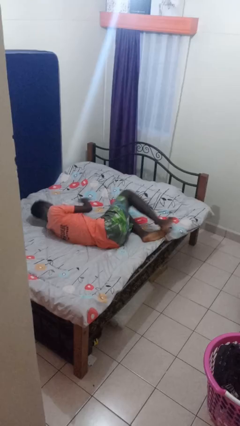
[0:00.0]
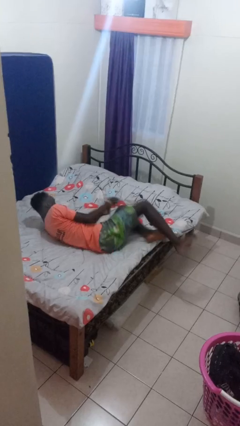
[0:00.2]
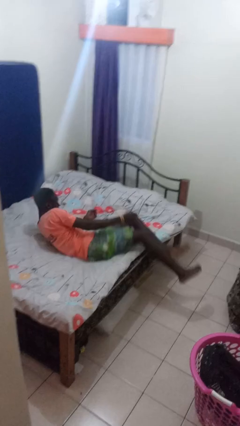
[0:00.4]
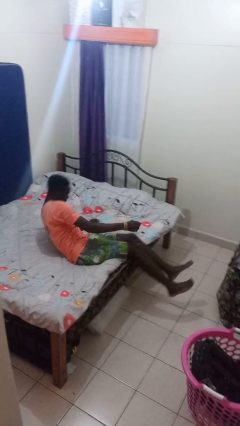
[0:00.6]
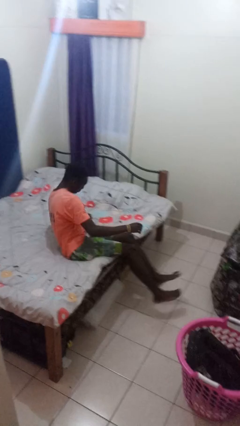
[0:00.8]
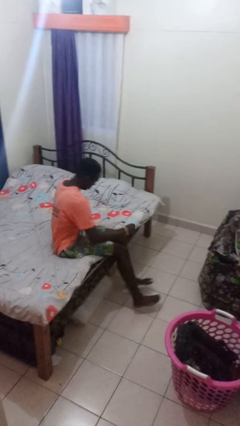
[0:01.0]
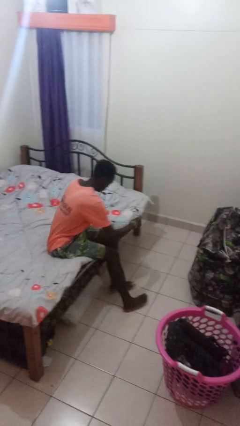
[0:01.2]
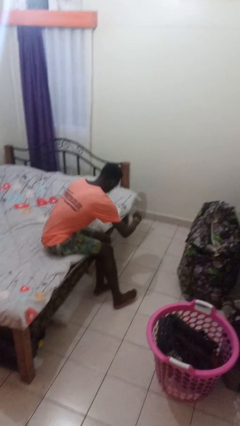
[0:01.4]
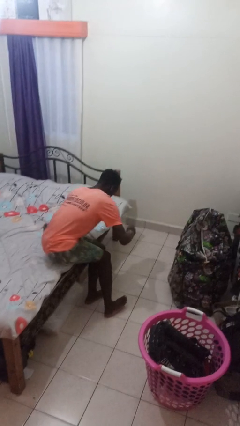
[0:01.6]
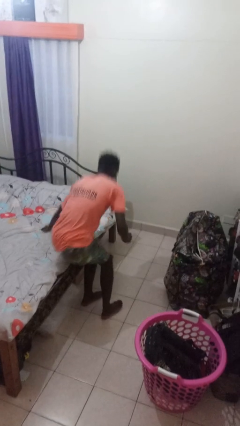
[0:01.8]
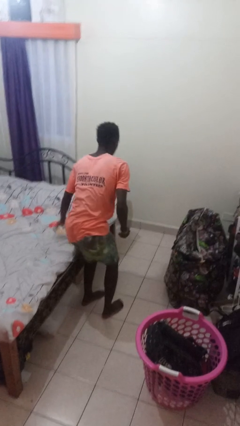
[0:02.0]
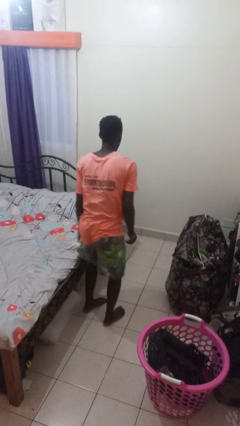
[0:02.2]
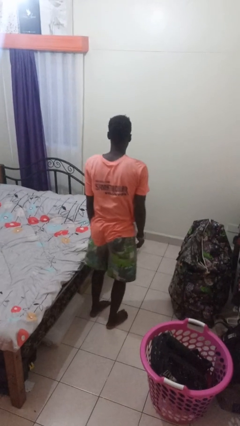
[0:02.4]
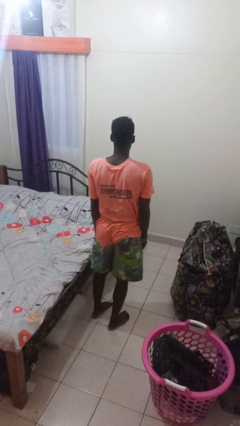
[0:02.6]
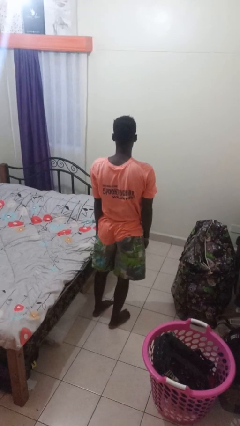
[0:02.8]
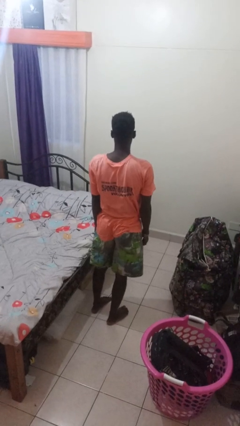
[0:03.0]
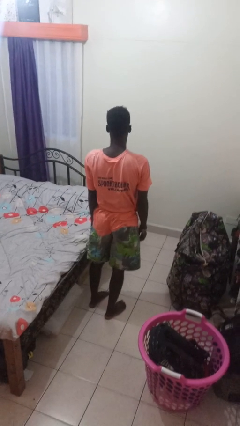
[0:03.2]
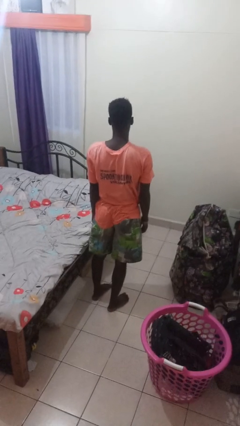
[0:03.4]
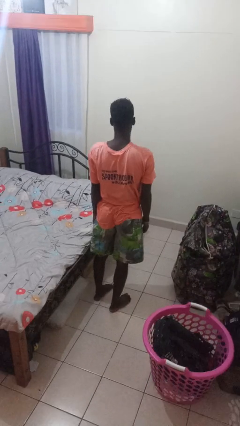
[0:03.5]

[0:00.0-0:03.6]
person stands up

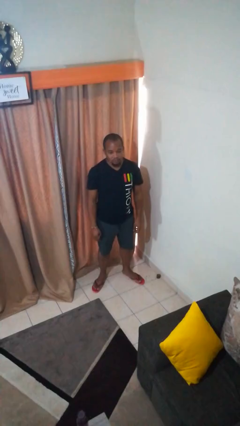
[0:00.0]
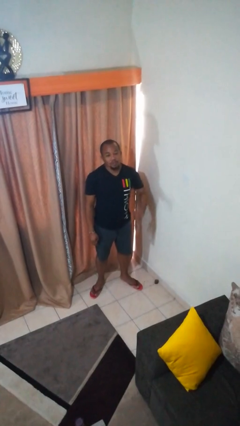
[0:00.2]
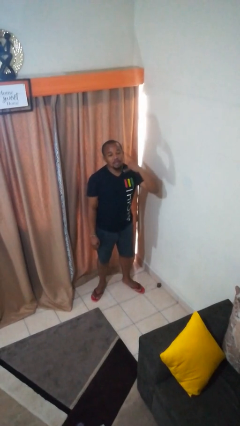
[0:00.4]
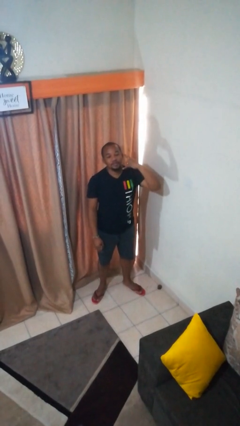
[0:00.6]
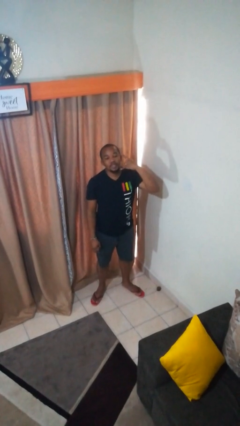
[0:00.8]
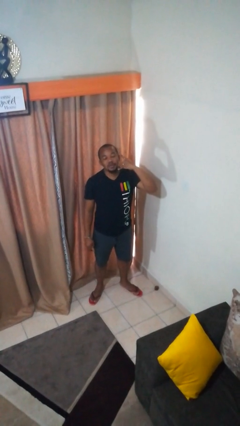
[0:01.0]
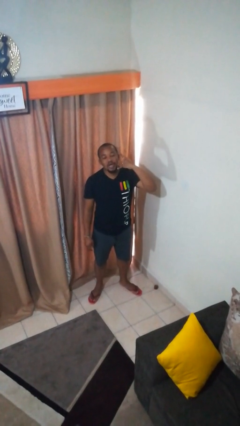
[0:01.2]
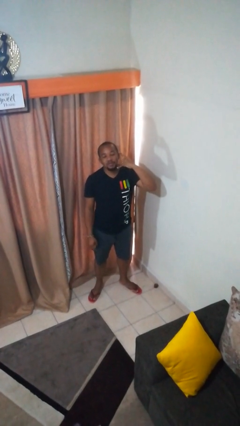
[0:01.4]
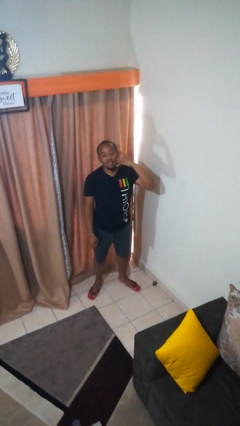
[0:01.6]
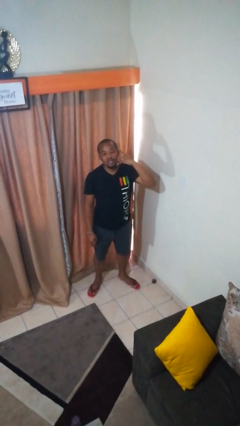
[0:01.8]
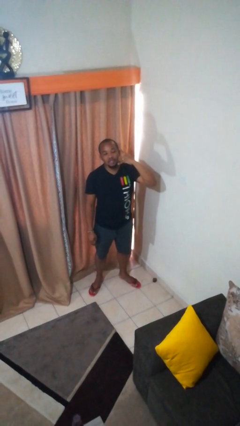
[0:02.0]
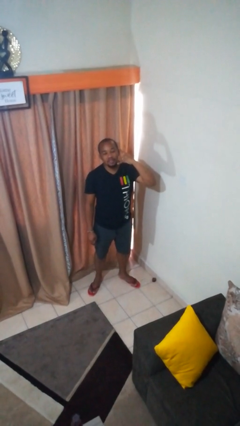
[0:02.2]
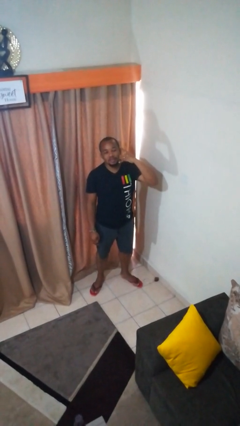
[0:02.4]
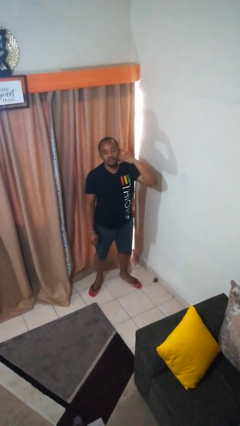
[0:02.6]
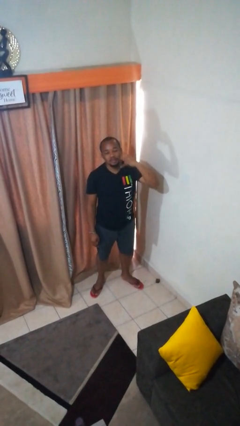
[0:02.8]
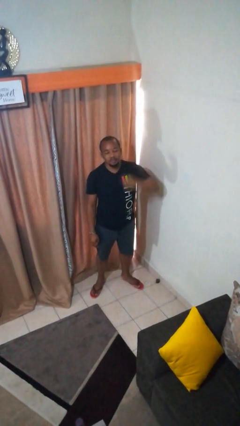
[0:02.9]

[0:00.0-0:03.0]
person gestures call me

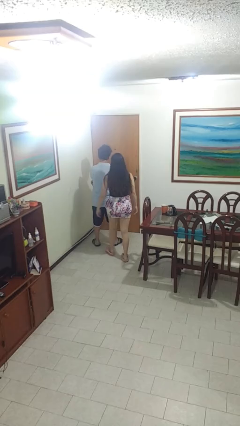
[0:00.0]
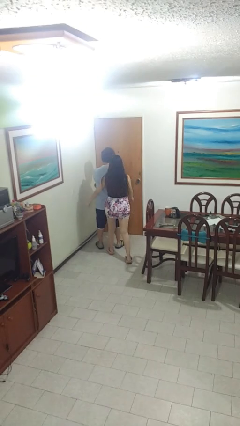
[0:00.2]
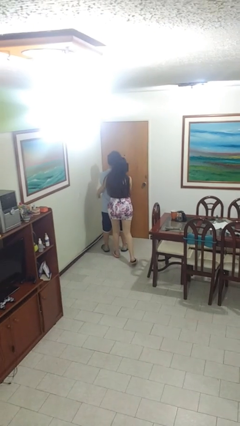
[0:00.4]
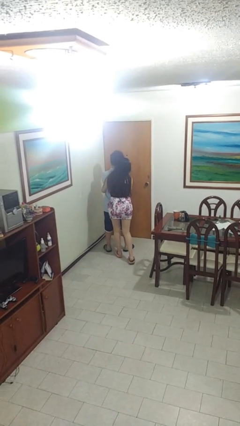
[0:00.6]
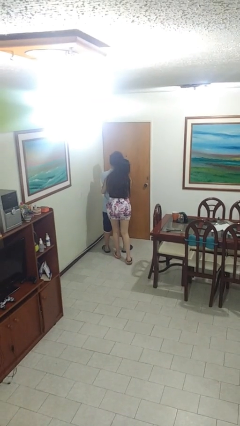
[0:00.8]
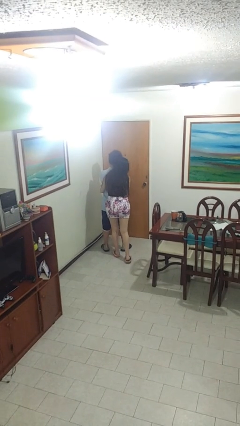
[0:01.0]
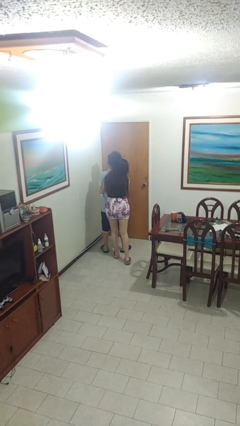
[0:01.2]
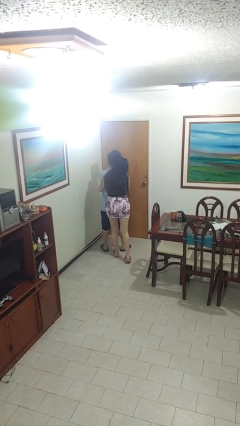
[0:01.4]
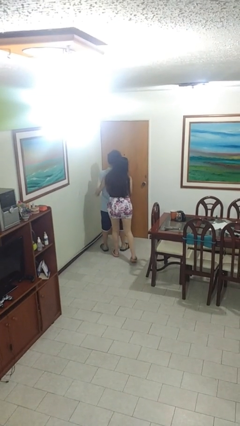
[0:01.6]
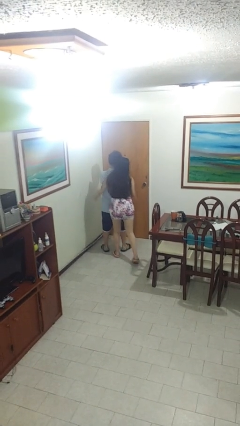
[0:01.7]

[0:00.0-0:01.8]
person hugs person from behind

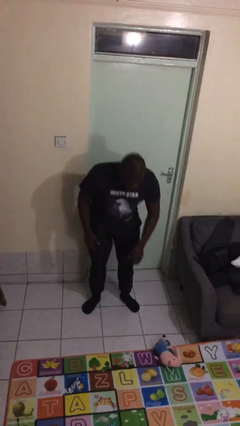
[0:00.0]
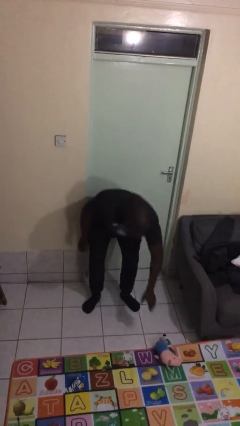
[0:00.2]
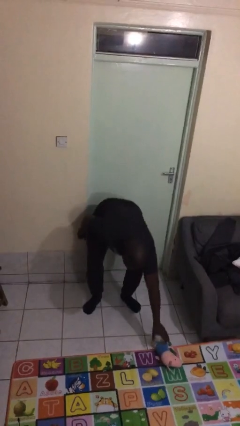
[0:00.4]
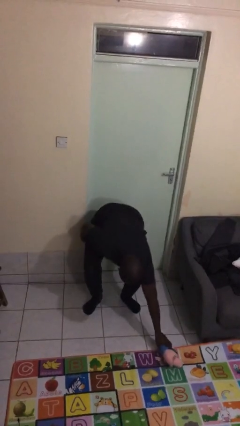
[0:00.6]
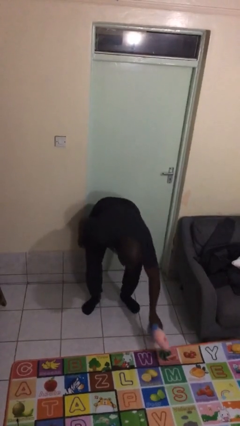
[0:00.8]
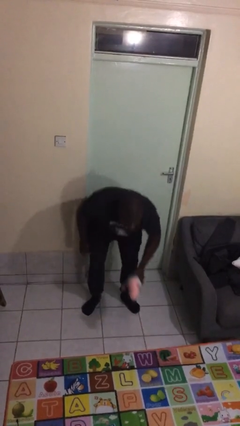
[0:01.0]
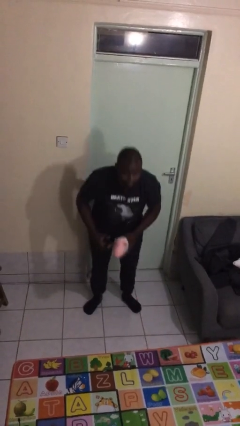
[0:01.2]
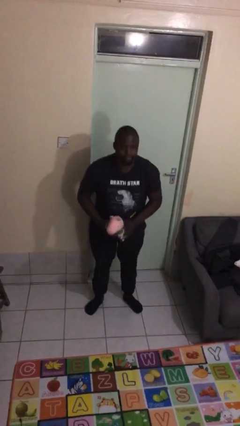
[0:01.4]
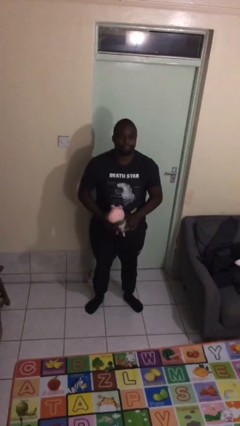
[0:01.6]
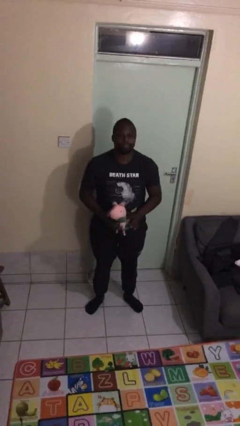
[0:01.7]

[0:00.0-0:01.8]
person picks up object from floor

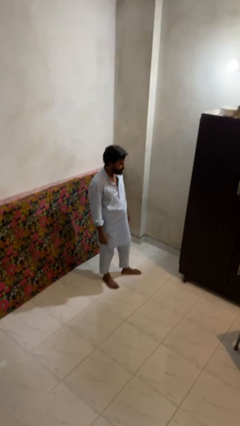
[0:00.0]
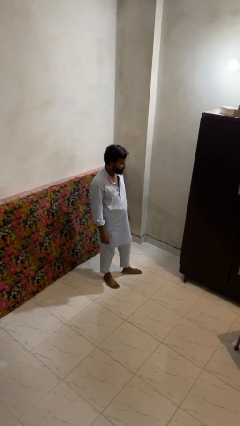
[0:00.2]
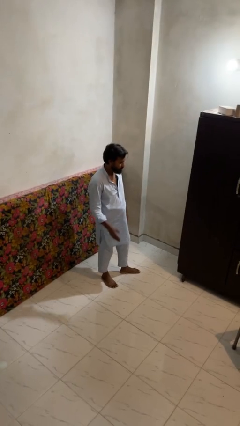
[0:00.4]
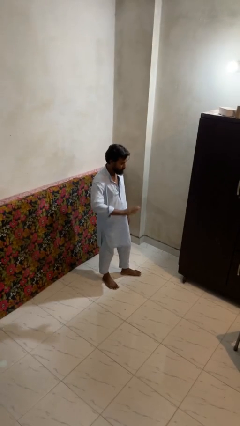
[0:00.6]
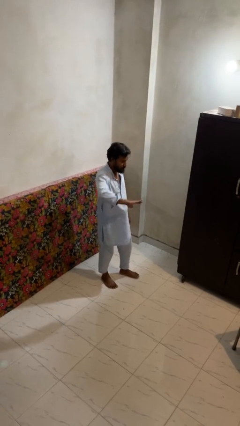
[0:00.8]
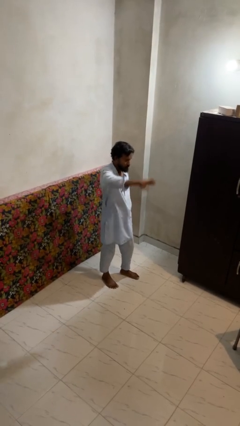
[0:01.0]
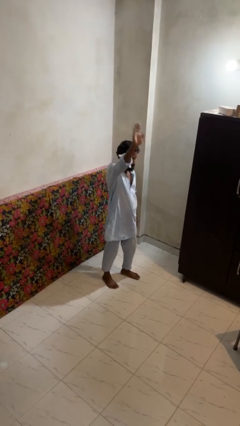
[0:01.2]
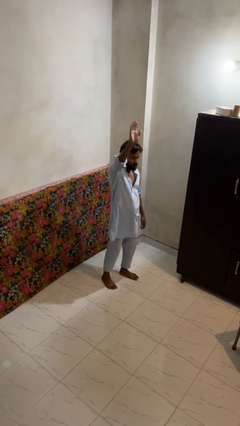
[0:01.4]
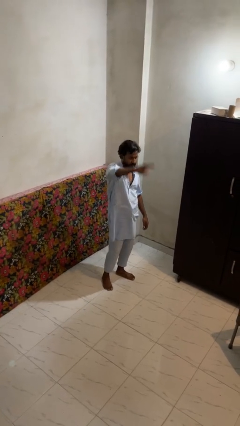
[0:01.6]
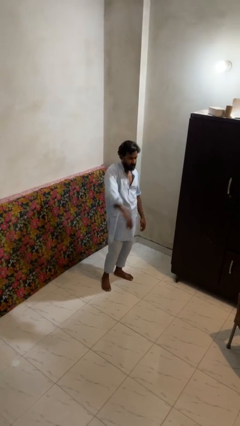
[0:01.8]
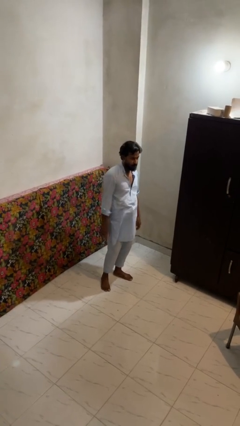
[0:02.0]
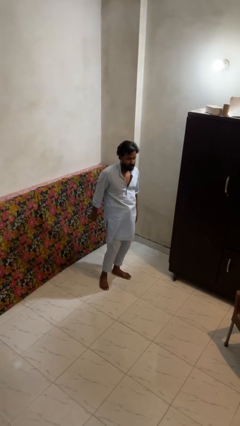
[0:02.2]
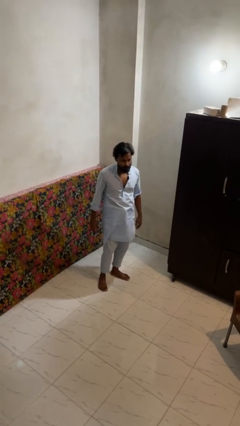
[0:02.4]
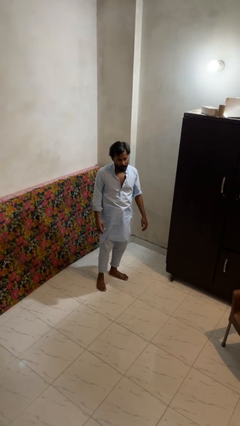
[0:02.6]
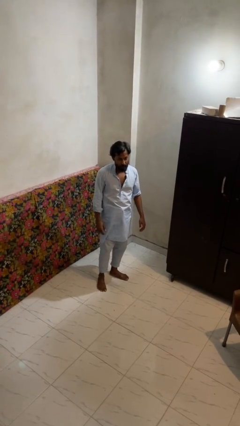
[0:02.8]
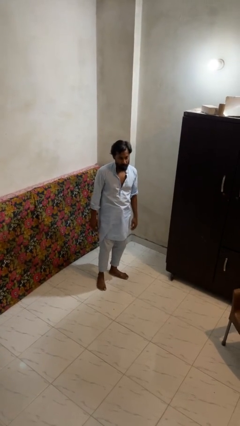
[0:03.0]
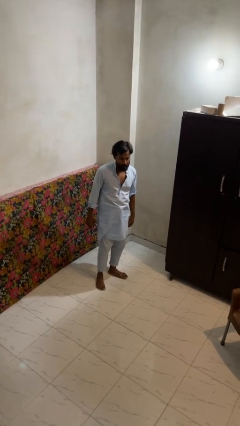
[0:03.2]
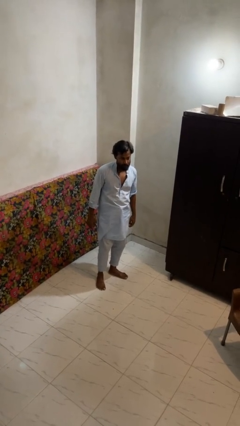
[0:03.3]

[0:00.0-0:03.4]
person gestures swipe up

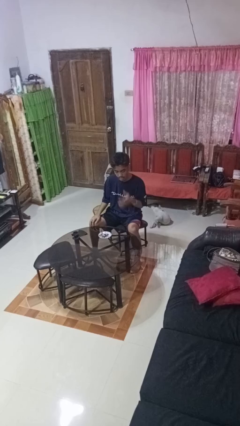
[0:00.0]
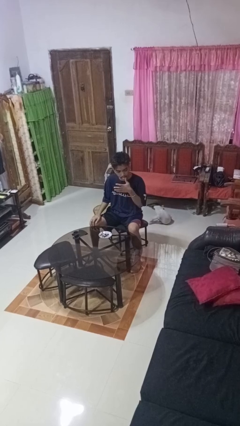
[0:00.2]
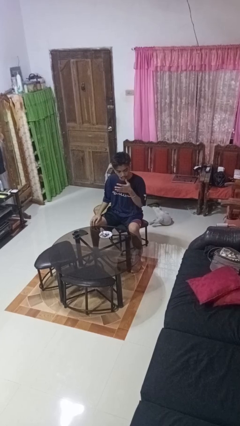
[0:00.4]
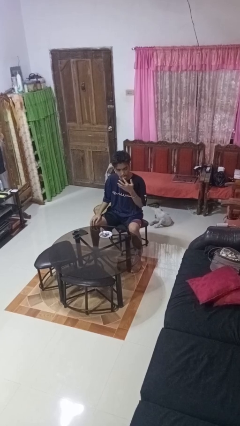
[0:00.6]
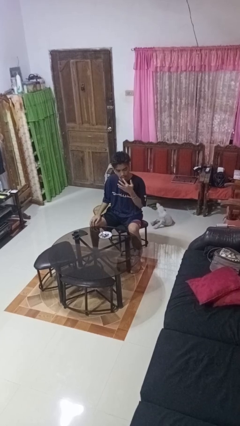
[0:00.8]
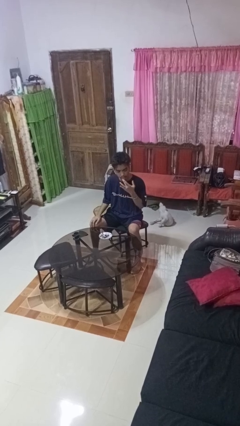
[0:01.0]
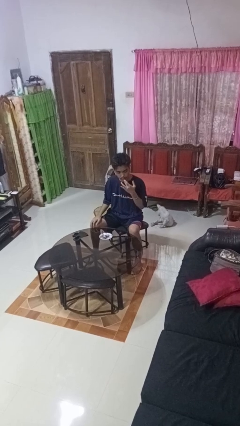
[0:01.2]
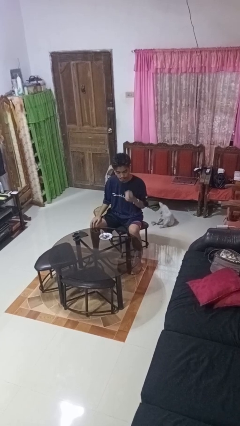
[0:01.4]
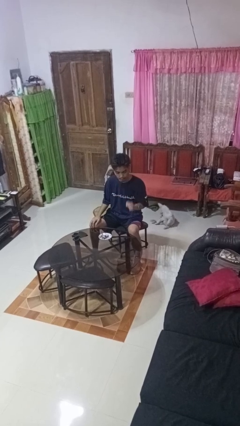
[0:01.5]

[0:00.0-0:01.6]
person licks fingers

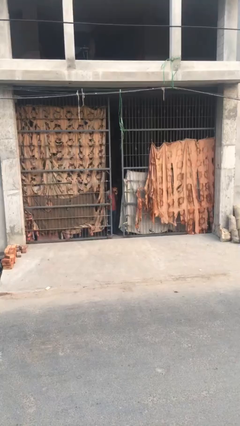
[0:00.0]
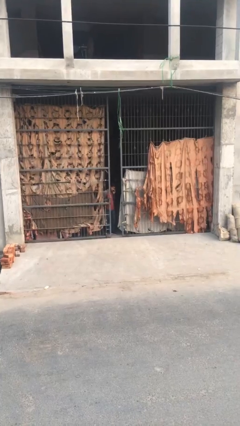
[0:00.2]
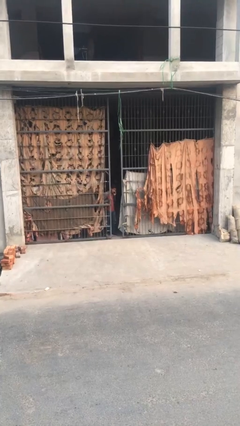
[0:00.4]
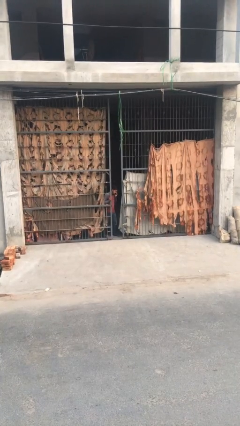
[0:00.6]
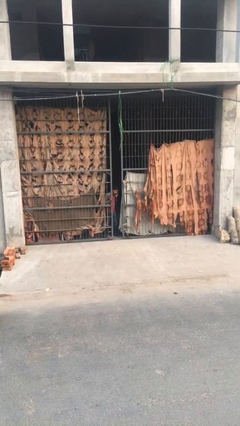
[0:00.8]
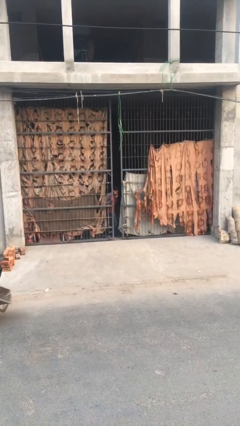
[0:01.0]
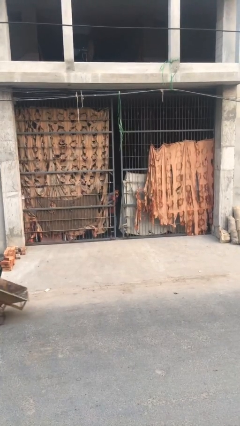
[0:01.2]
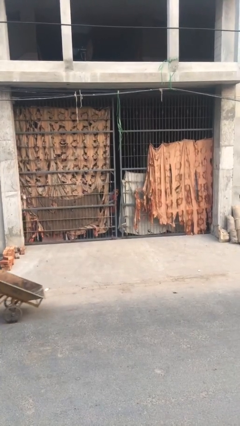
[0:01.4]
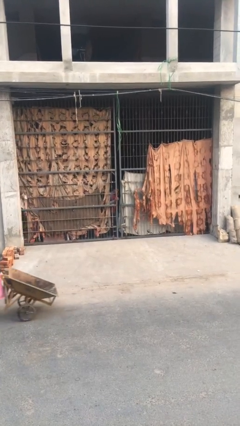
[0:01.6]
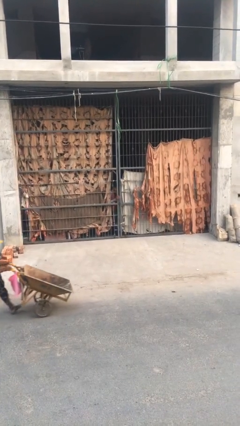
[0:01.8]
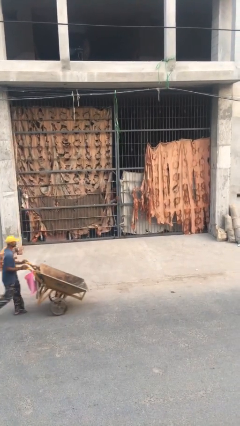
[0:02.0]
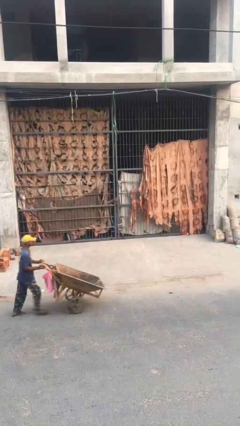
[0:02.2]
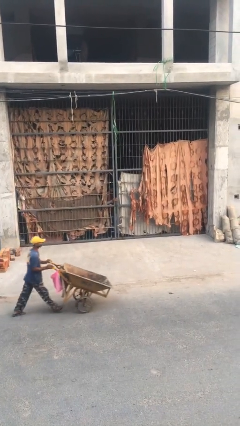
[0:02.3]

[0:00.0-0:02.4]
person closes facility door
